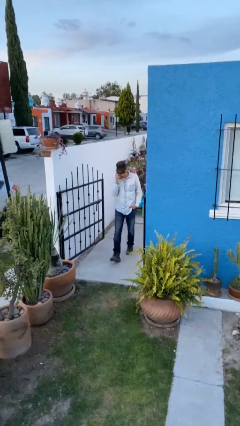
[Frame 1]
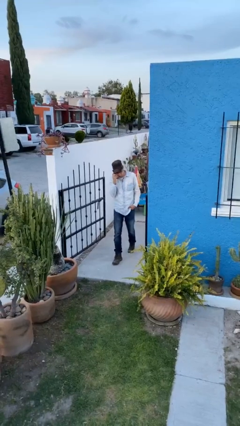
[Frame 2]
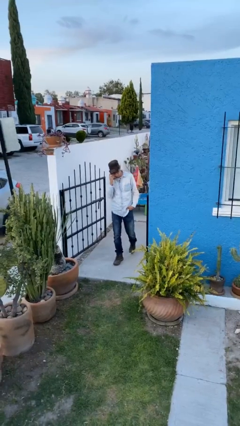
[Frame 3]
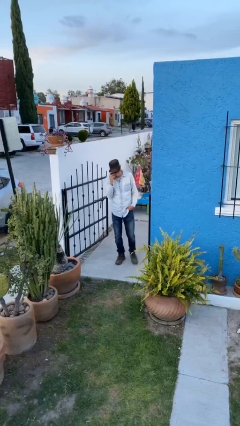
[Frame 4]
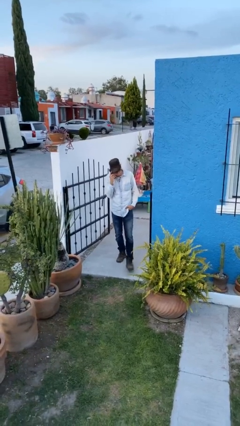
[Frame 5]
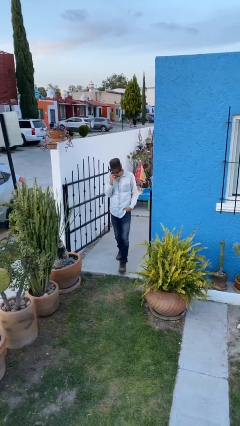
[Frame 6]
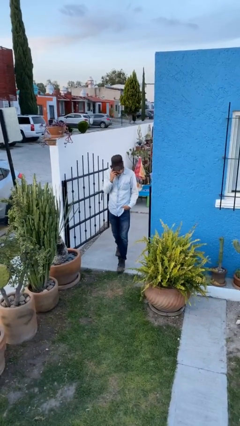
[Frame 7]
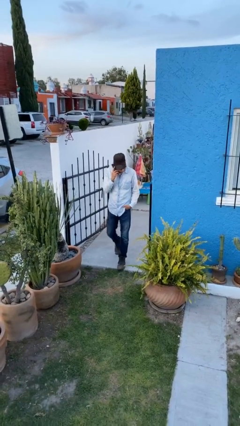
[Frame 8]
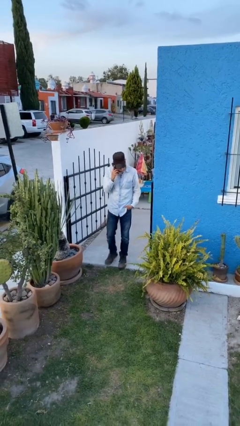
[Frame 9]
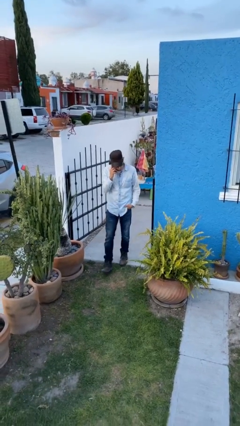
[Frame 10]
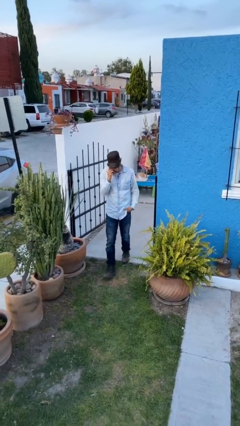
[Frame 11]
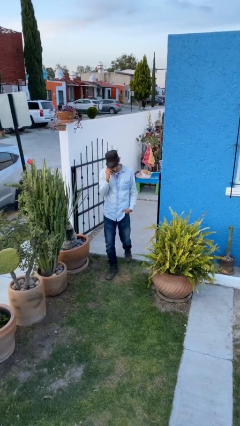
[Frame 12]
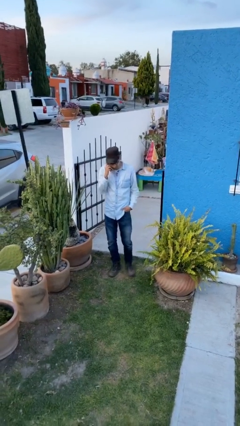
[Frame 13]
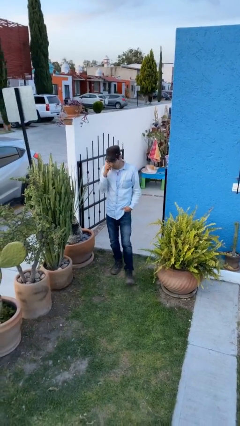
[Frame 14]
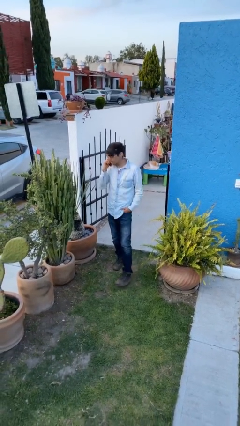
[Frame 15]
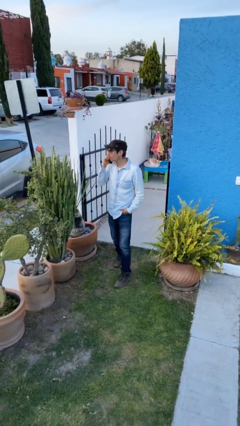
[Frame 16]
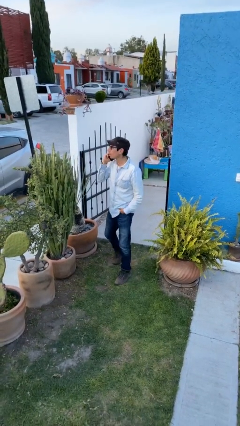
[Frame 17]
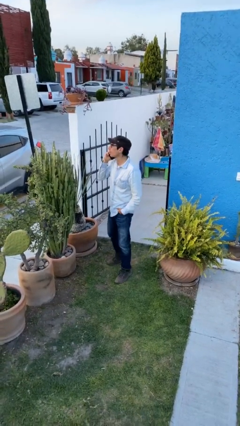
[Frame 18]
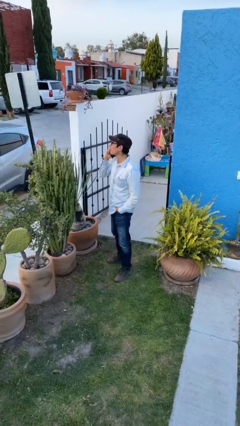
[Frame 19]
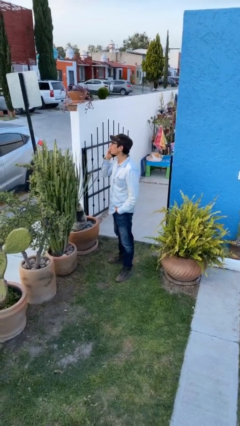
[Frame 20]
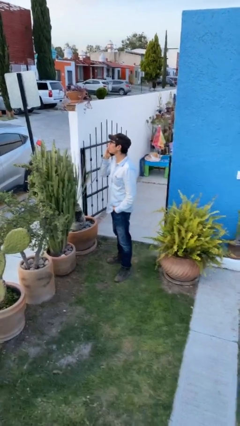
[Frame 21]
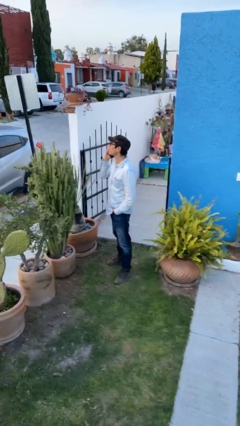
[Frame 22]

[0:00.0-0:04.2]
person enters scene through structure

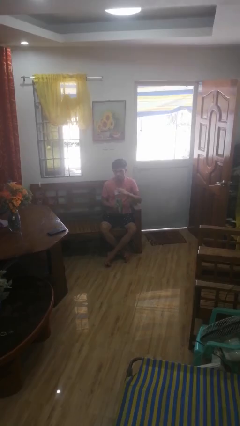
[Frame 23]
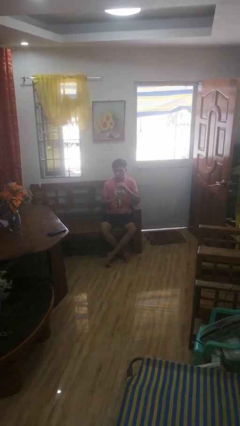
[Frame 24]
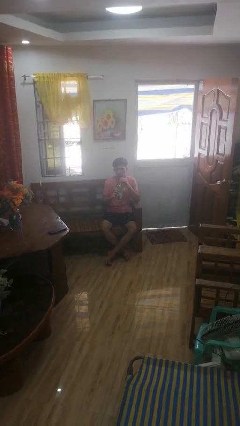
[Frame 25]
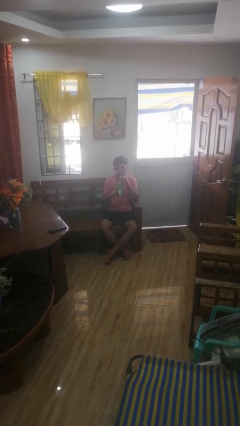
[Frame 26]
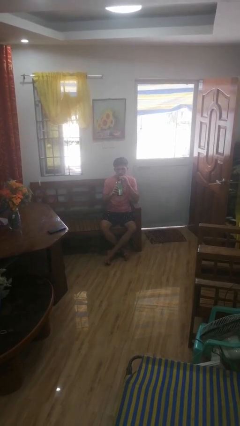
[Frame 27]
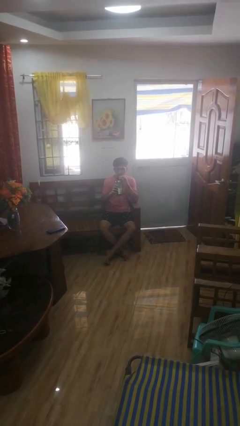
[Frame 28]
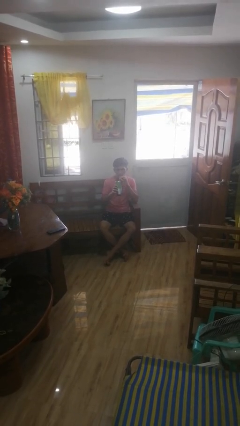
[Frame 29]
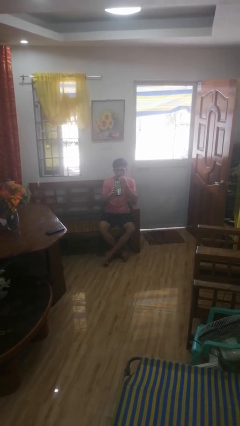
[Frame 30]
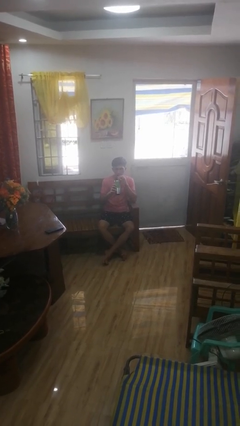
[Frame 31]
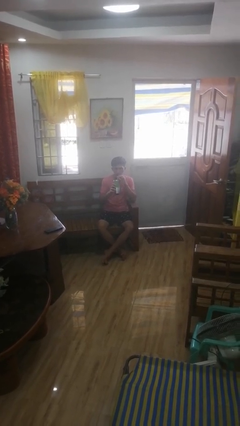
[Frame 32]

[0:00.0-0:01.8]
person drinks from straw

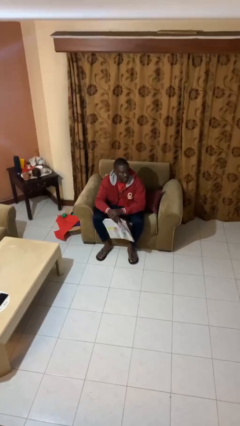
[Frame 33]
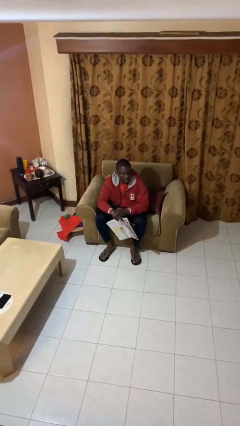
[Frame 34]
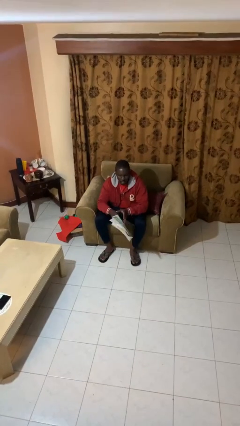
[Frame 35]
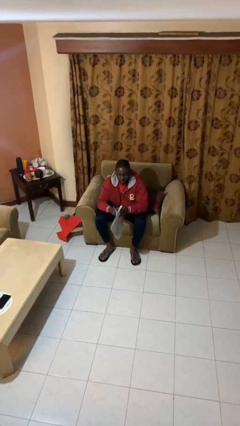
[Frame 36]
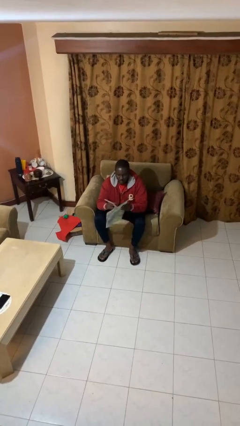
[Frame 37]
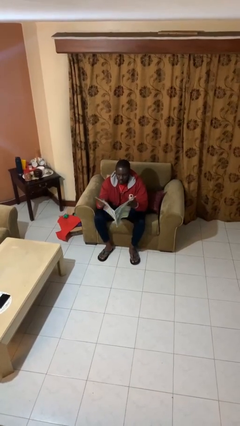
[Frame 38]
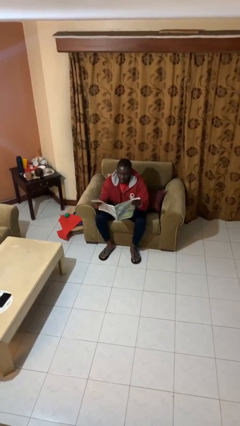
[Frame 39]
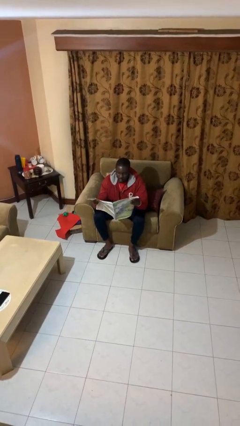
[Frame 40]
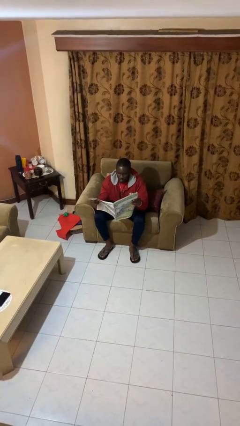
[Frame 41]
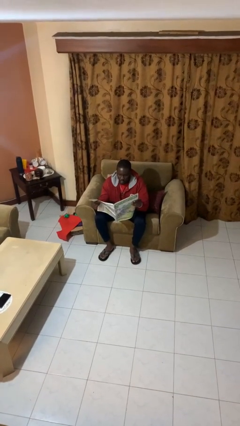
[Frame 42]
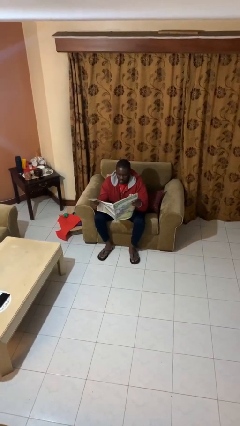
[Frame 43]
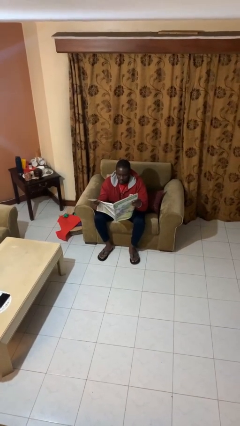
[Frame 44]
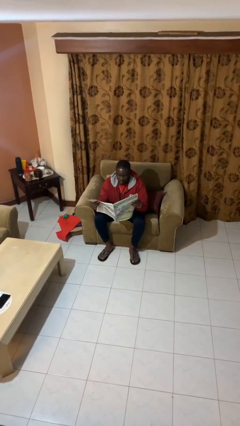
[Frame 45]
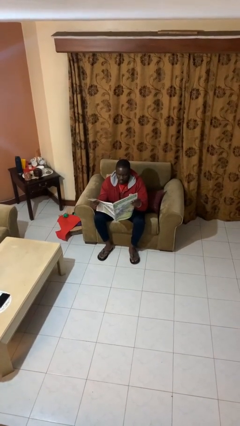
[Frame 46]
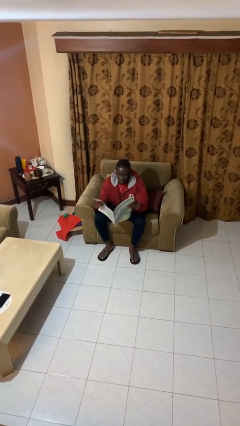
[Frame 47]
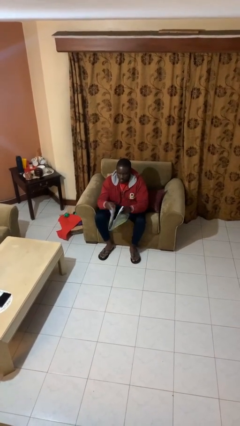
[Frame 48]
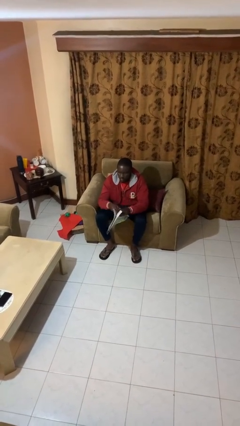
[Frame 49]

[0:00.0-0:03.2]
person reads newspaper

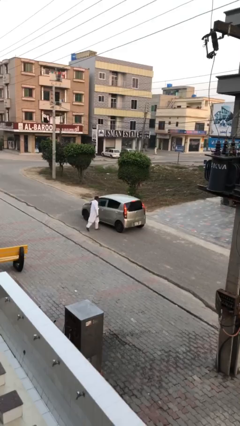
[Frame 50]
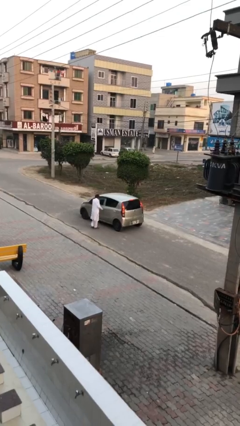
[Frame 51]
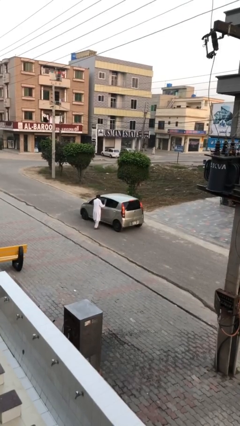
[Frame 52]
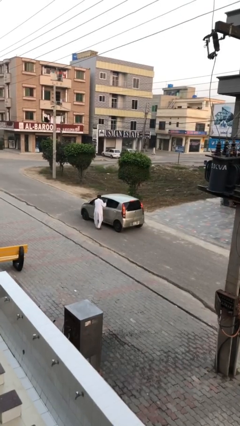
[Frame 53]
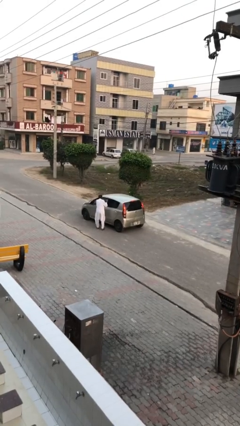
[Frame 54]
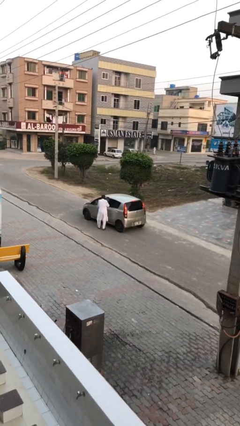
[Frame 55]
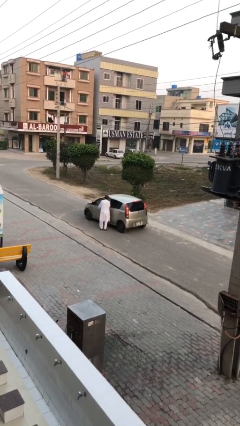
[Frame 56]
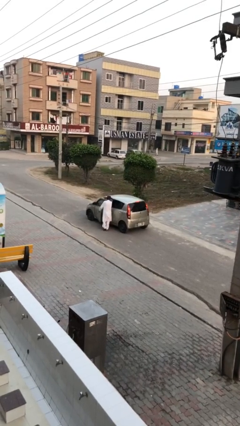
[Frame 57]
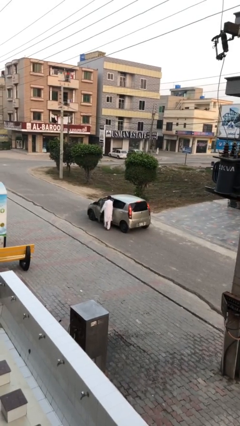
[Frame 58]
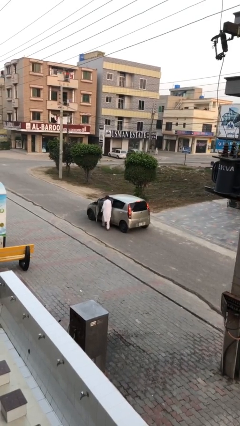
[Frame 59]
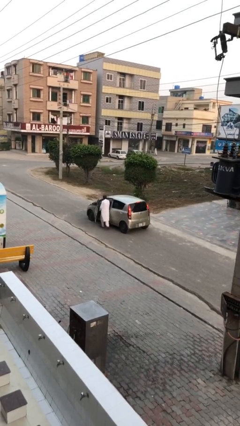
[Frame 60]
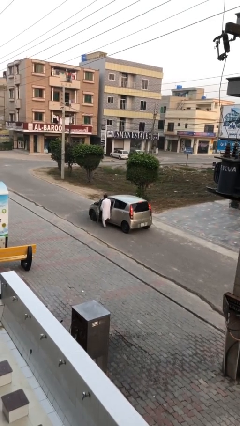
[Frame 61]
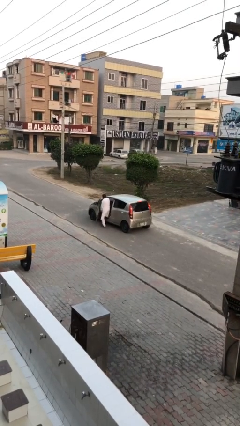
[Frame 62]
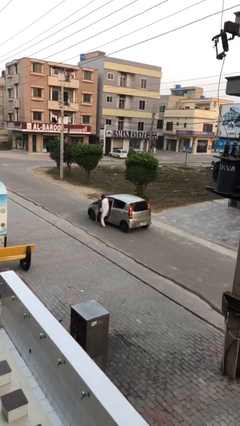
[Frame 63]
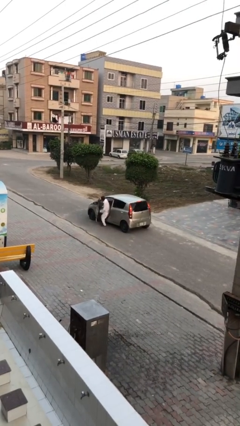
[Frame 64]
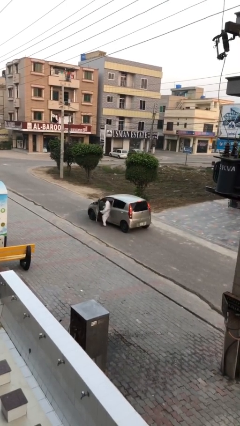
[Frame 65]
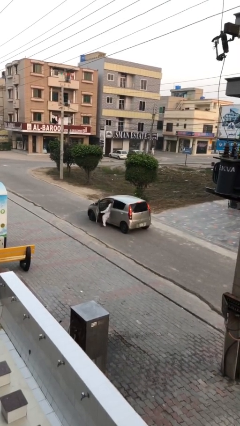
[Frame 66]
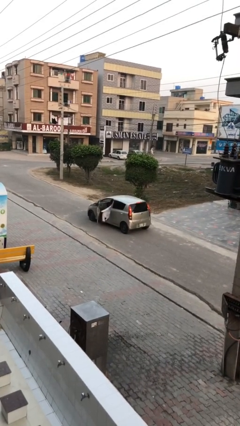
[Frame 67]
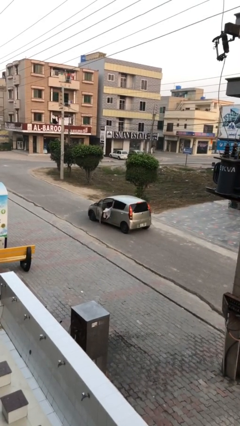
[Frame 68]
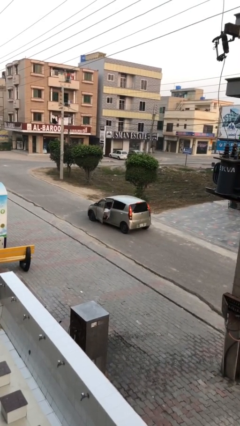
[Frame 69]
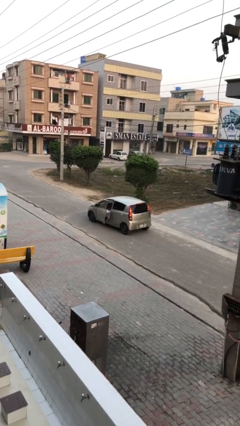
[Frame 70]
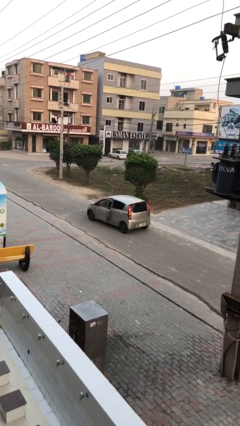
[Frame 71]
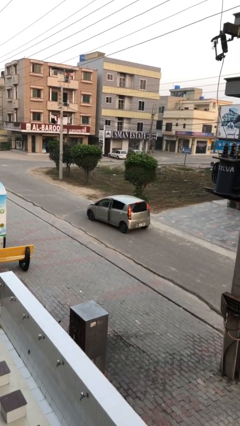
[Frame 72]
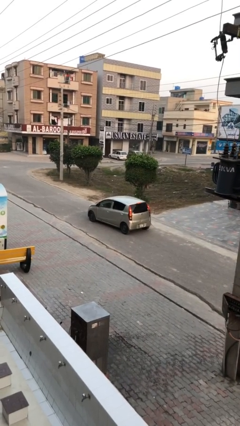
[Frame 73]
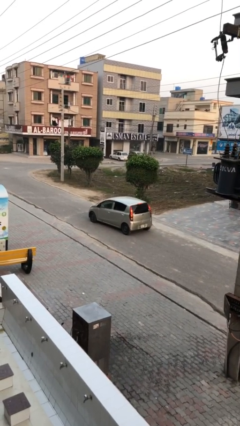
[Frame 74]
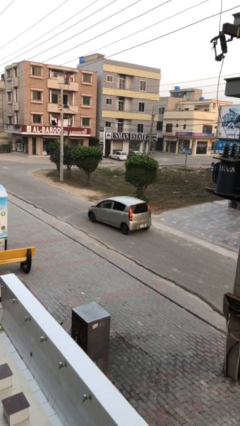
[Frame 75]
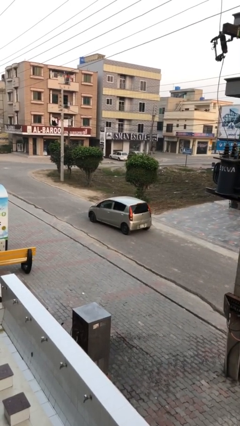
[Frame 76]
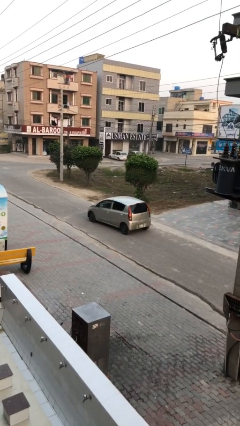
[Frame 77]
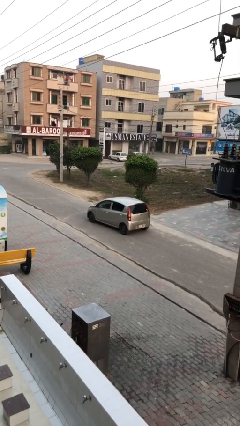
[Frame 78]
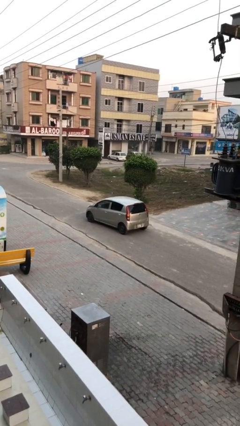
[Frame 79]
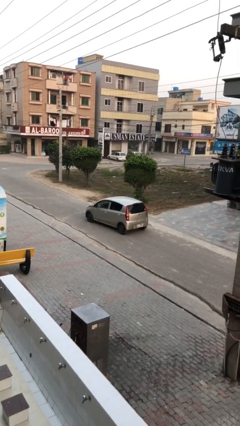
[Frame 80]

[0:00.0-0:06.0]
car picks up person

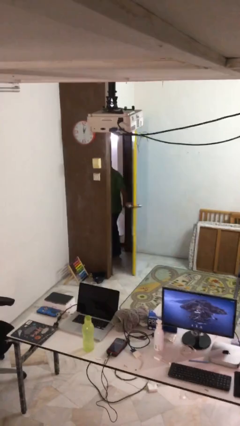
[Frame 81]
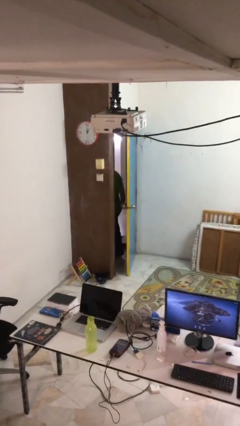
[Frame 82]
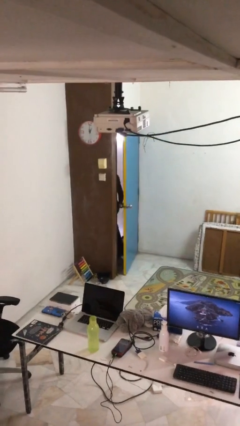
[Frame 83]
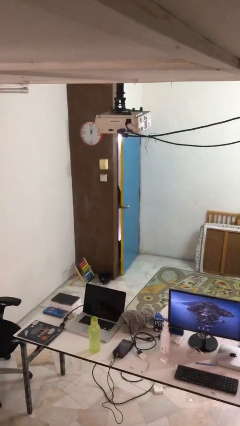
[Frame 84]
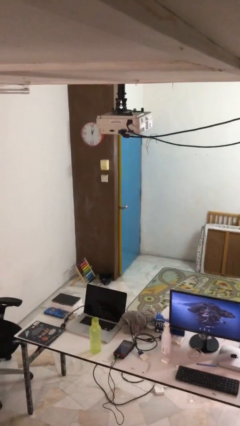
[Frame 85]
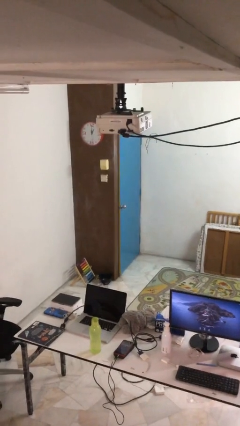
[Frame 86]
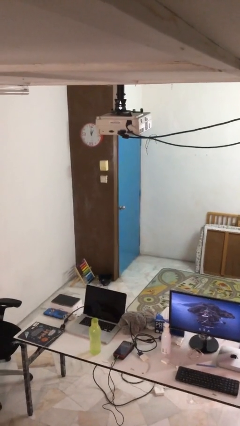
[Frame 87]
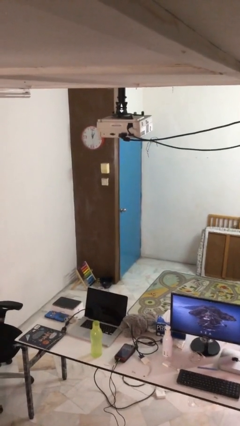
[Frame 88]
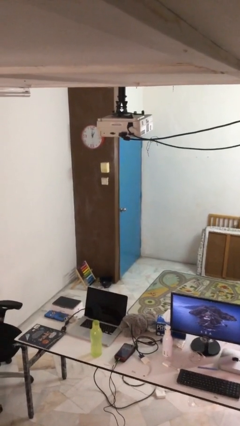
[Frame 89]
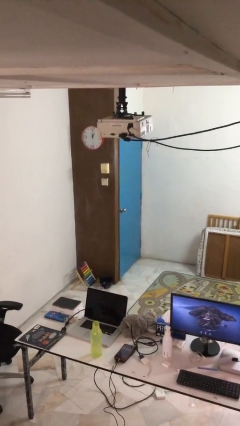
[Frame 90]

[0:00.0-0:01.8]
person closes facility door

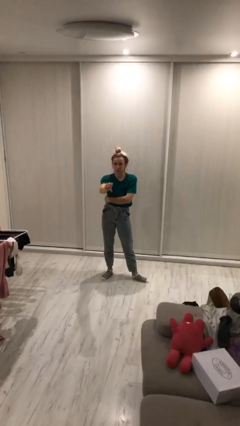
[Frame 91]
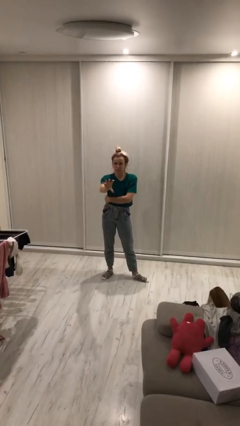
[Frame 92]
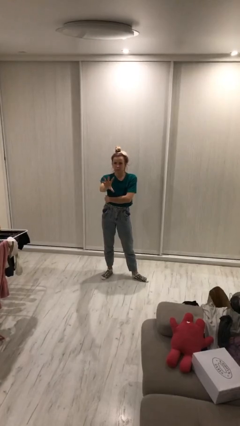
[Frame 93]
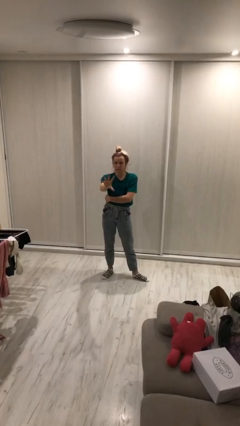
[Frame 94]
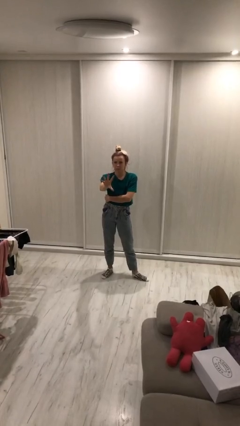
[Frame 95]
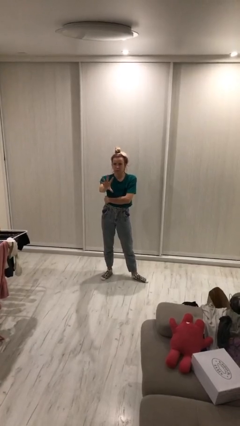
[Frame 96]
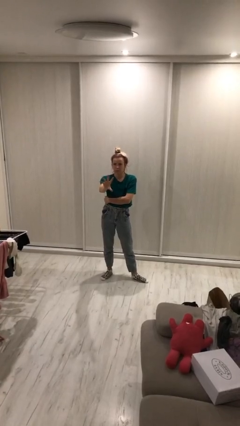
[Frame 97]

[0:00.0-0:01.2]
person gestures zoom in
